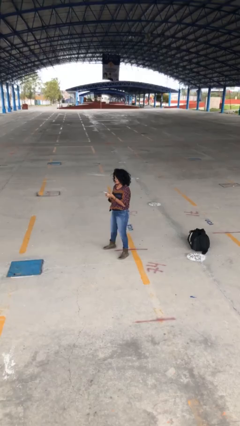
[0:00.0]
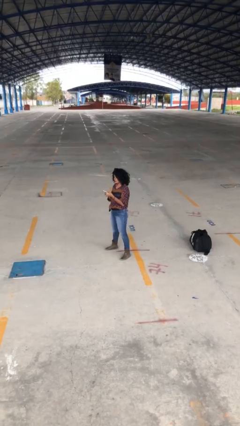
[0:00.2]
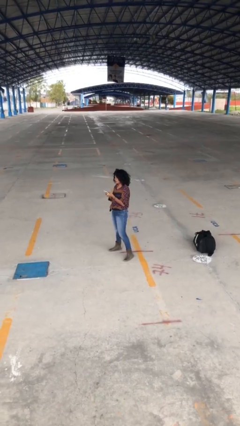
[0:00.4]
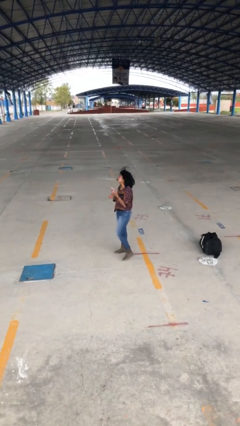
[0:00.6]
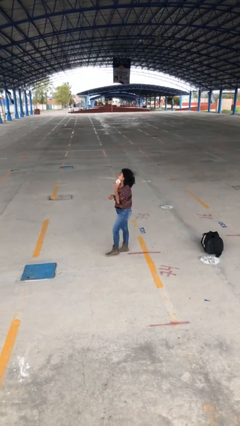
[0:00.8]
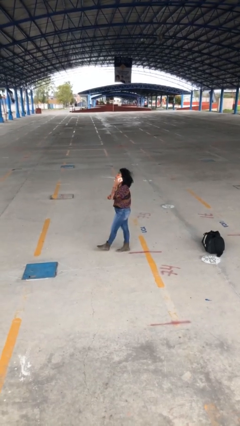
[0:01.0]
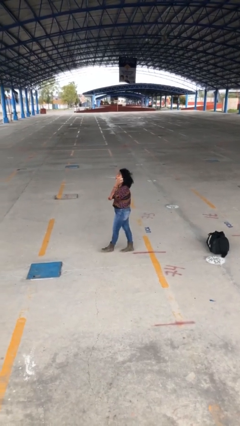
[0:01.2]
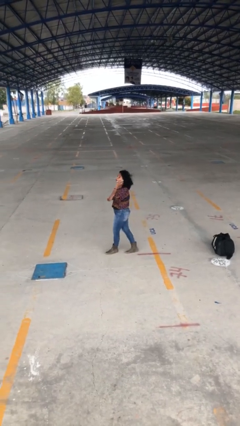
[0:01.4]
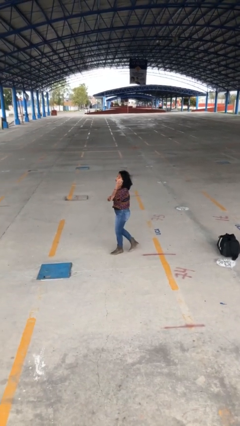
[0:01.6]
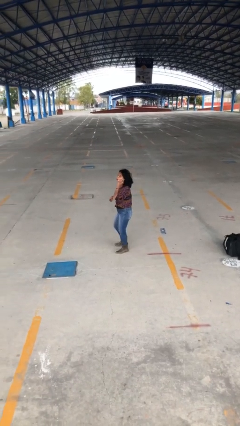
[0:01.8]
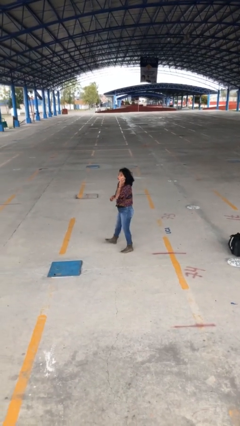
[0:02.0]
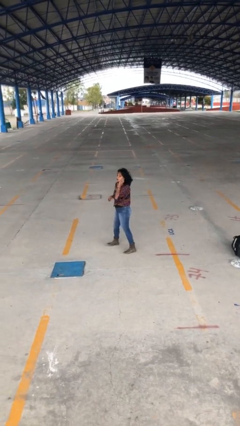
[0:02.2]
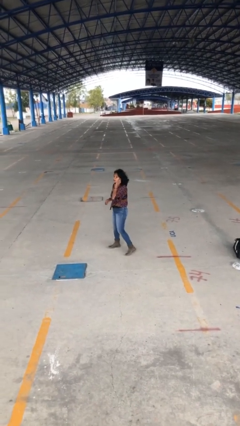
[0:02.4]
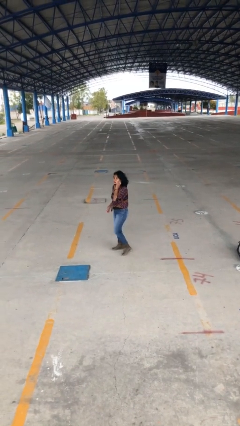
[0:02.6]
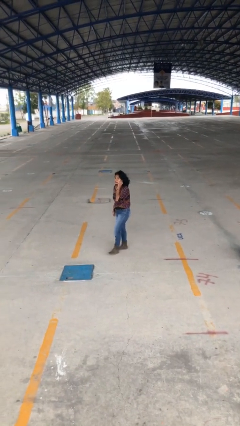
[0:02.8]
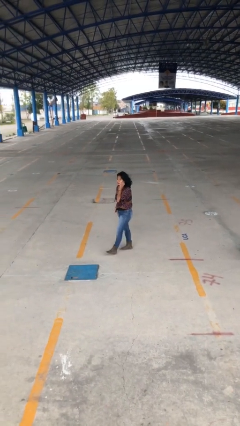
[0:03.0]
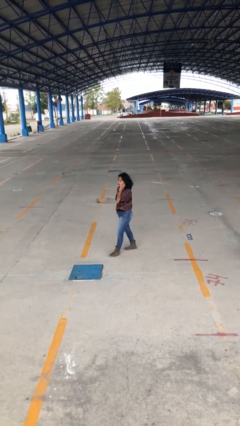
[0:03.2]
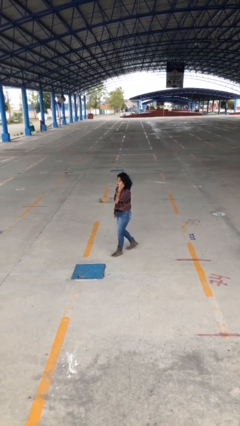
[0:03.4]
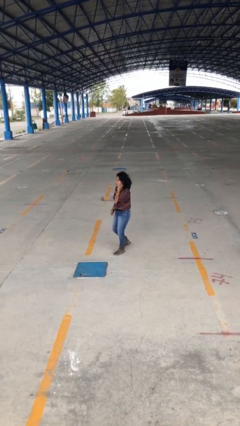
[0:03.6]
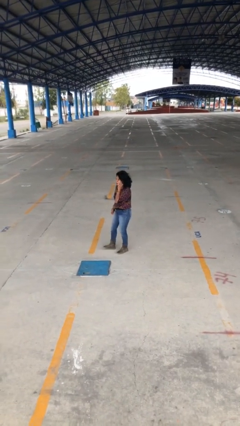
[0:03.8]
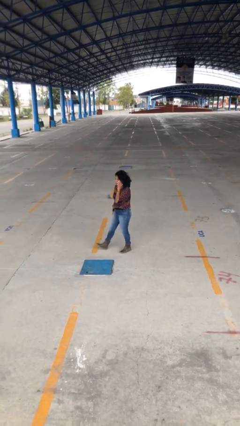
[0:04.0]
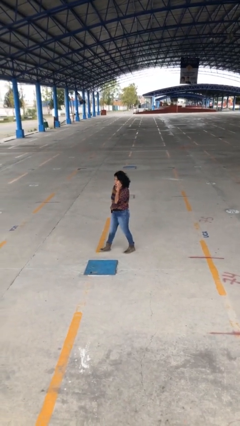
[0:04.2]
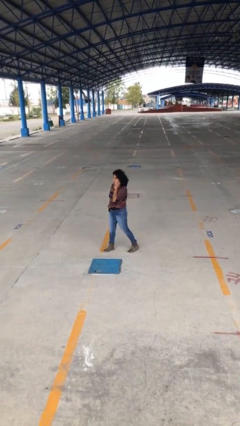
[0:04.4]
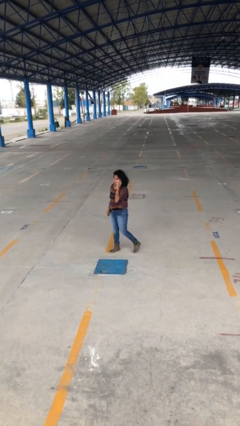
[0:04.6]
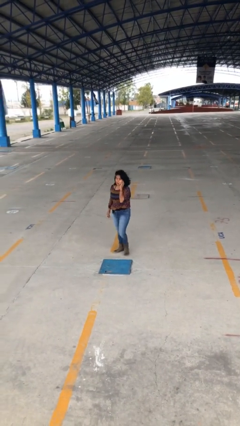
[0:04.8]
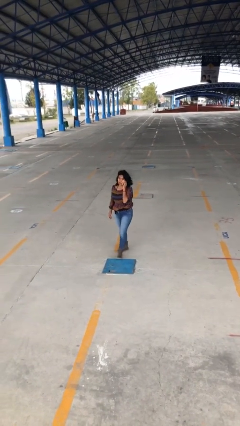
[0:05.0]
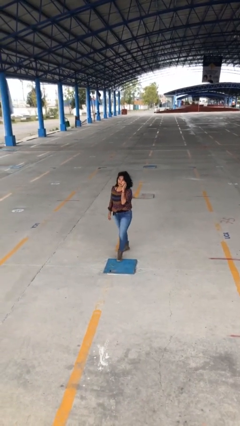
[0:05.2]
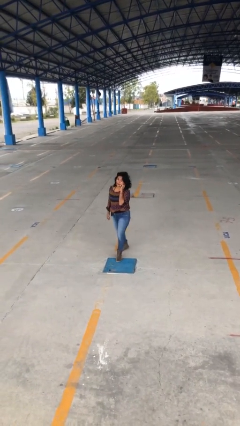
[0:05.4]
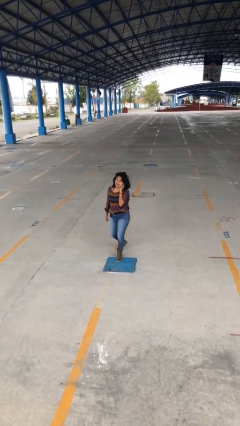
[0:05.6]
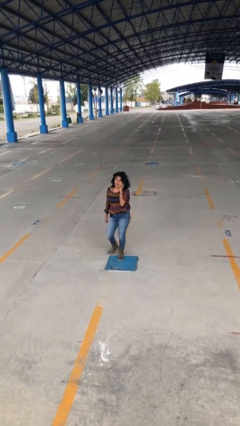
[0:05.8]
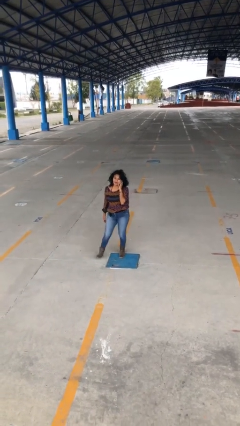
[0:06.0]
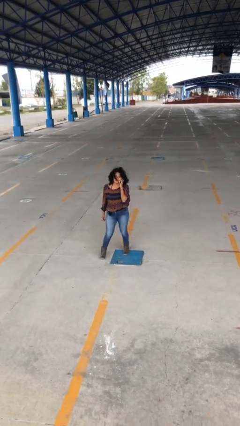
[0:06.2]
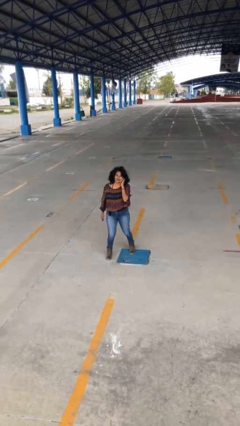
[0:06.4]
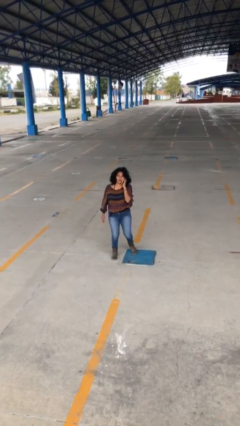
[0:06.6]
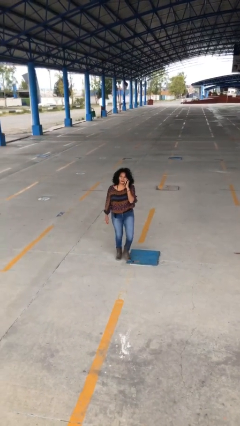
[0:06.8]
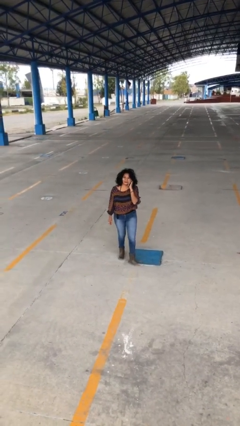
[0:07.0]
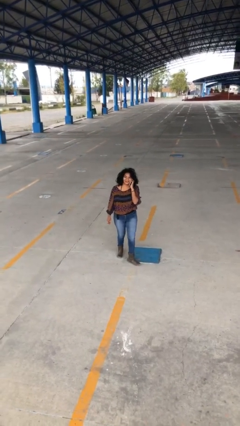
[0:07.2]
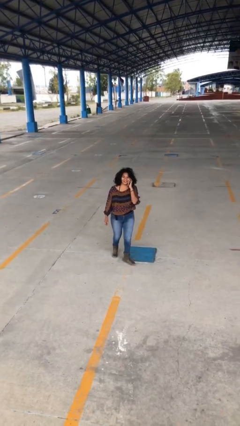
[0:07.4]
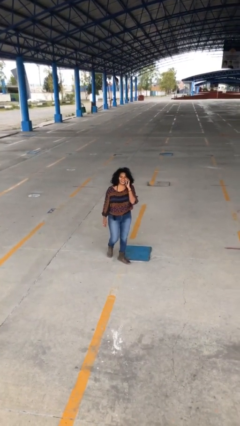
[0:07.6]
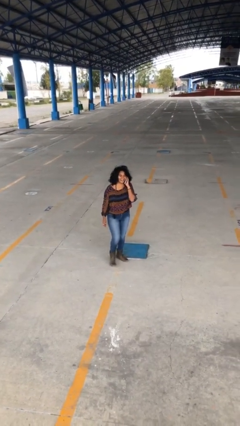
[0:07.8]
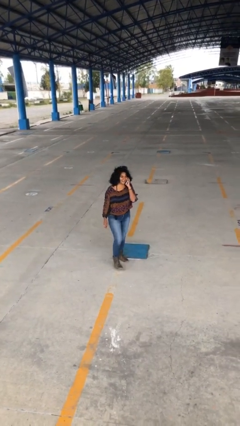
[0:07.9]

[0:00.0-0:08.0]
person talks on phone

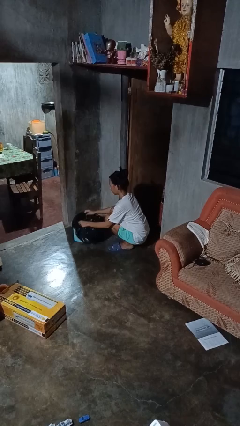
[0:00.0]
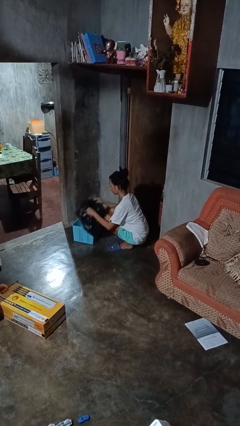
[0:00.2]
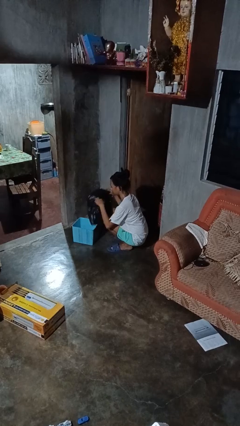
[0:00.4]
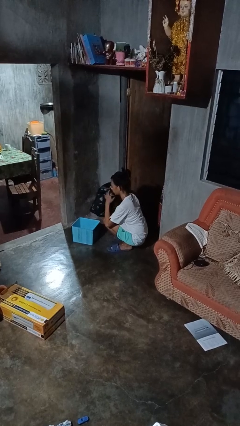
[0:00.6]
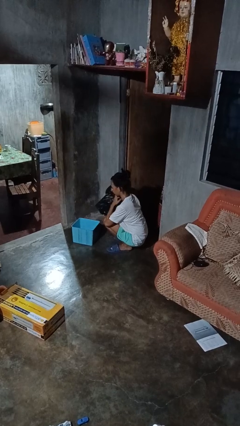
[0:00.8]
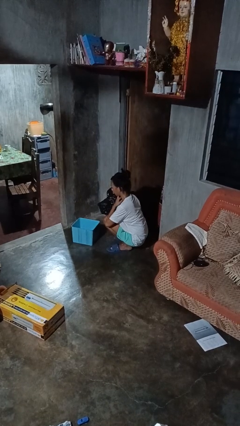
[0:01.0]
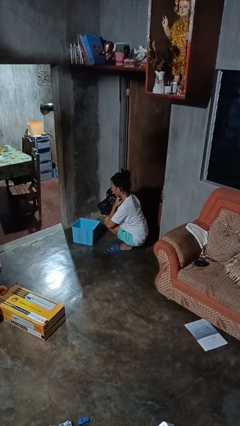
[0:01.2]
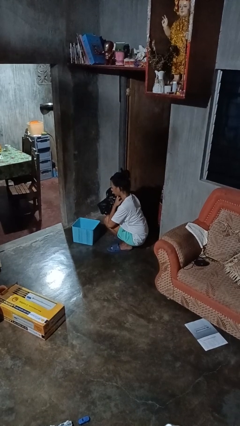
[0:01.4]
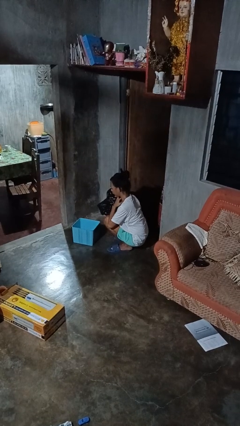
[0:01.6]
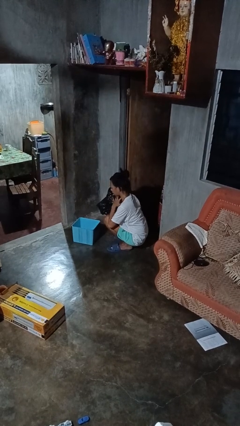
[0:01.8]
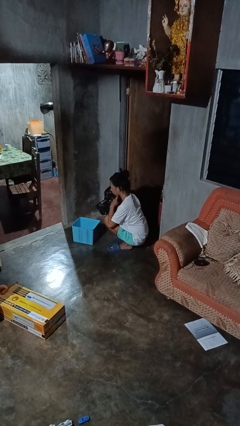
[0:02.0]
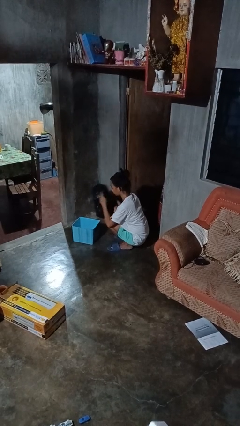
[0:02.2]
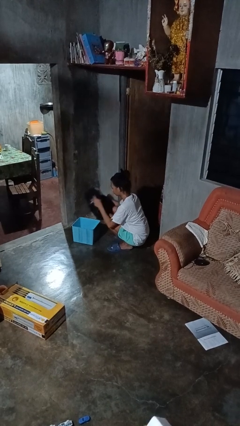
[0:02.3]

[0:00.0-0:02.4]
person removes trashbag from trashcan

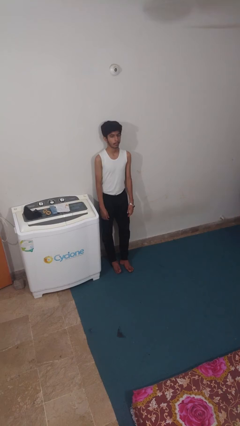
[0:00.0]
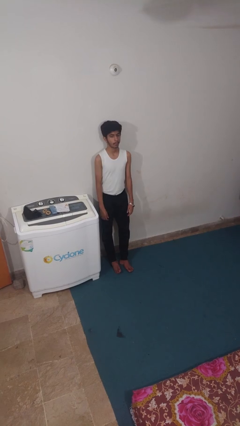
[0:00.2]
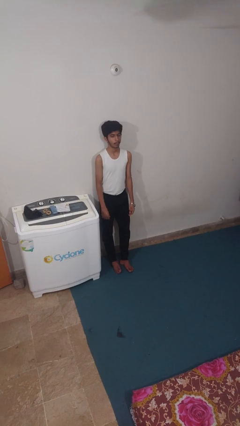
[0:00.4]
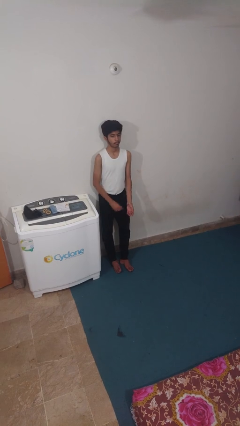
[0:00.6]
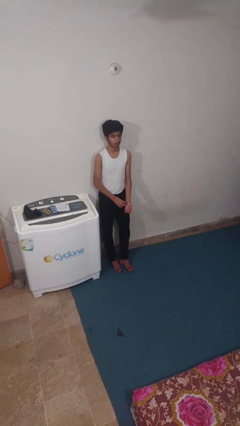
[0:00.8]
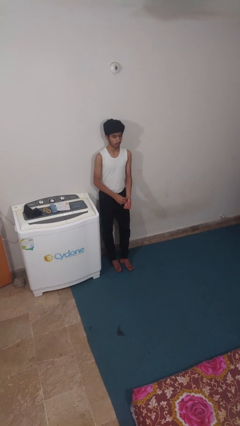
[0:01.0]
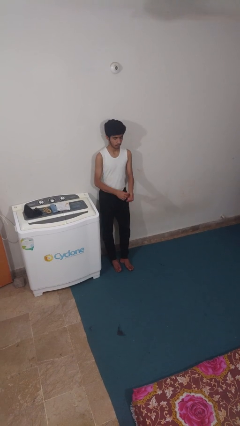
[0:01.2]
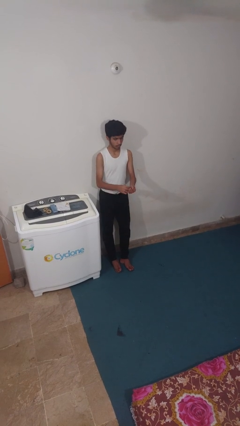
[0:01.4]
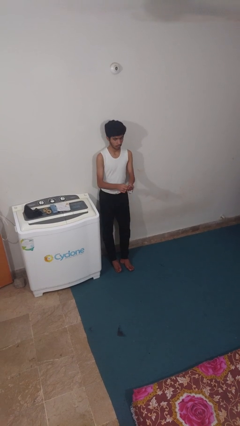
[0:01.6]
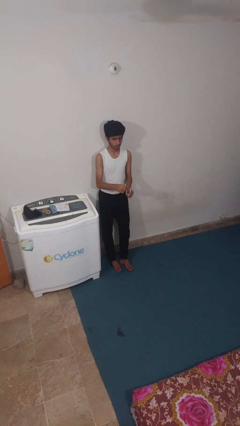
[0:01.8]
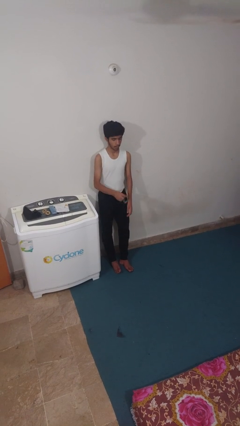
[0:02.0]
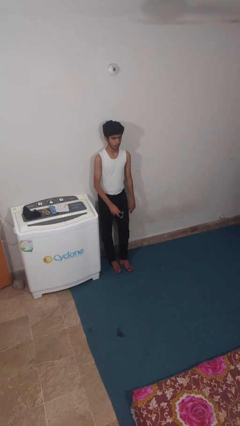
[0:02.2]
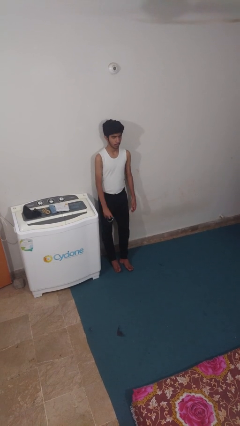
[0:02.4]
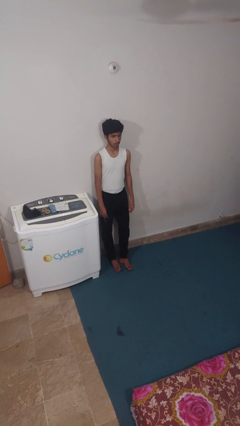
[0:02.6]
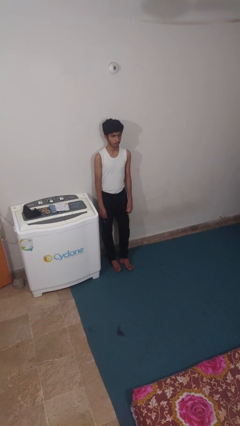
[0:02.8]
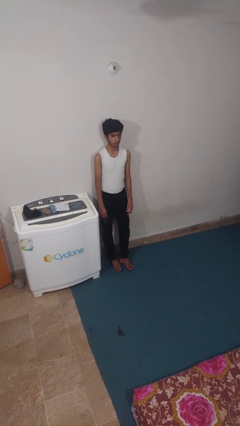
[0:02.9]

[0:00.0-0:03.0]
person takes off wristwatch

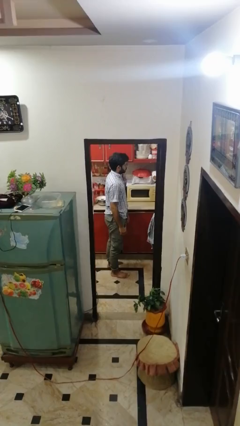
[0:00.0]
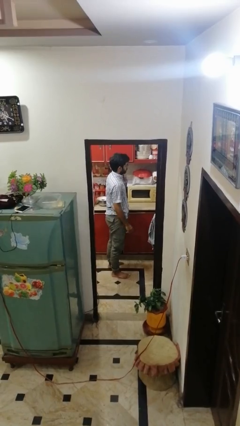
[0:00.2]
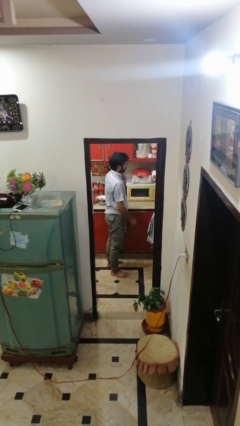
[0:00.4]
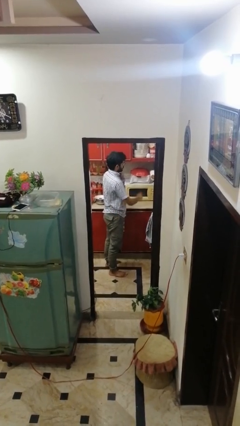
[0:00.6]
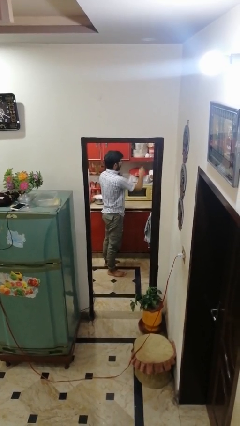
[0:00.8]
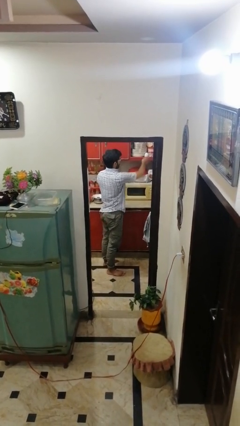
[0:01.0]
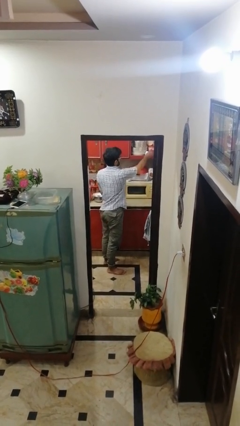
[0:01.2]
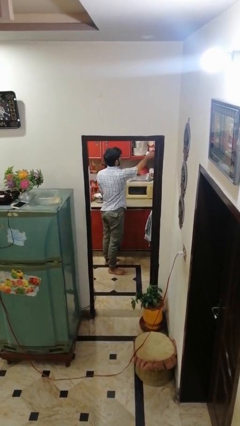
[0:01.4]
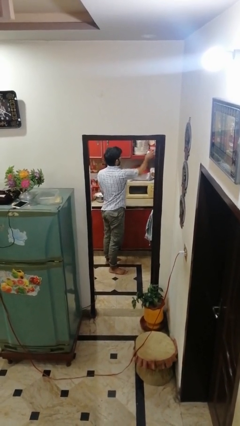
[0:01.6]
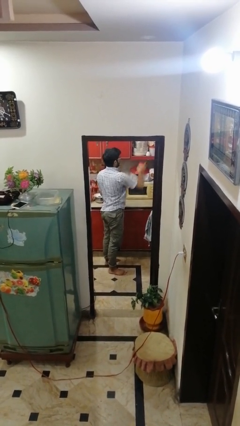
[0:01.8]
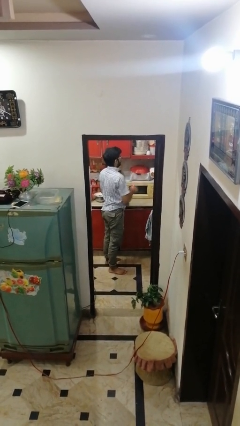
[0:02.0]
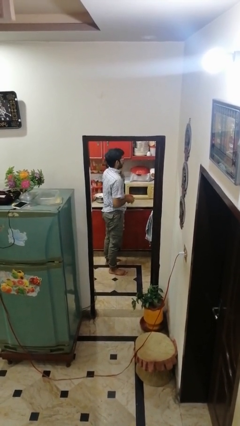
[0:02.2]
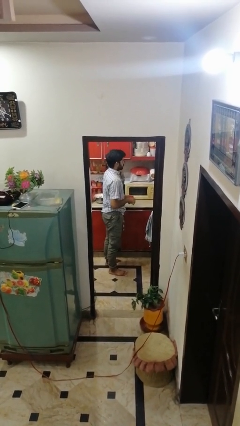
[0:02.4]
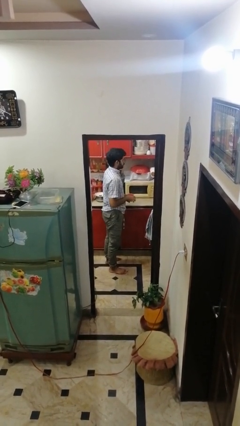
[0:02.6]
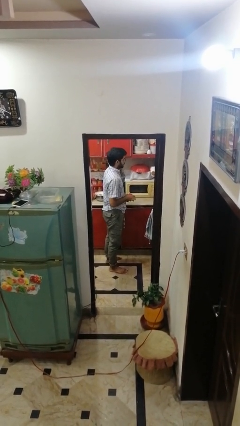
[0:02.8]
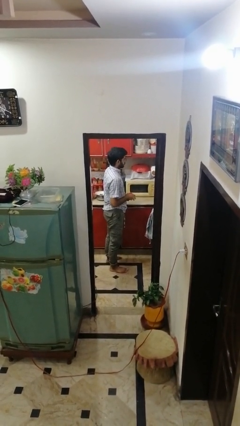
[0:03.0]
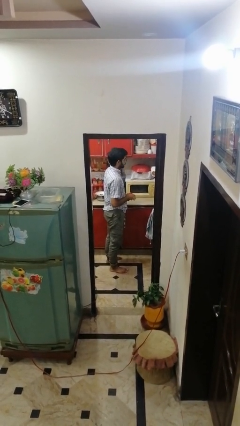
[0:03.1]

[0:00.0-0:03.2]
person picks up object from cabinet

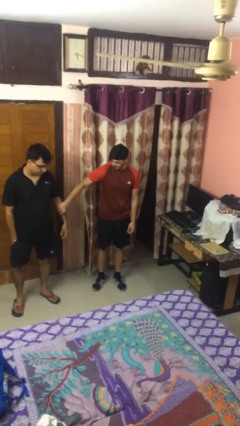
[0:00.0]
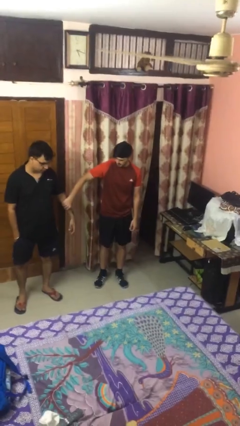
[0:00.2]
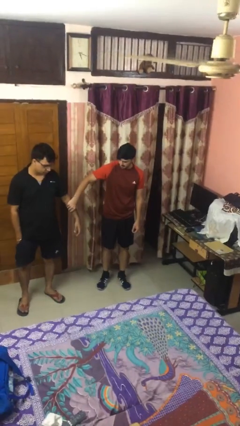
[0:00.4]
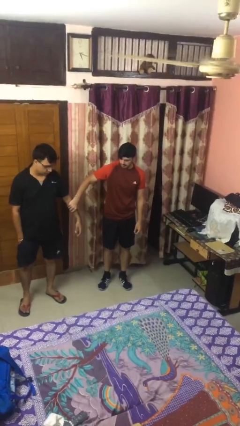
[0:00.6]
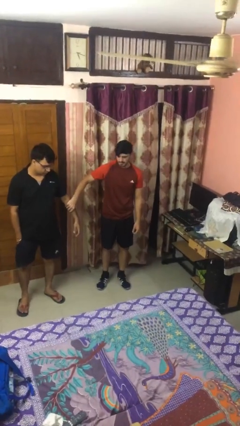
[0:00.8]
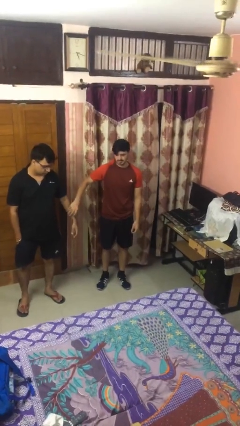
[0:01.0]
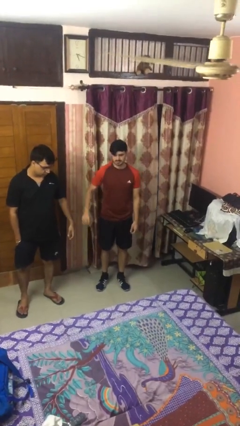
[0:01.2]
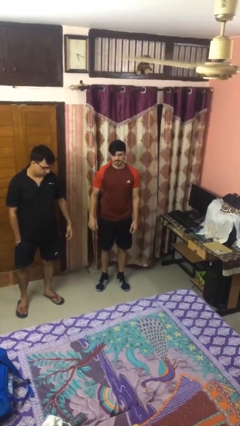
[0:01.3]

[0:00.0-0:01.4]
person grabs person by forearm
